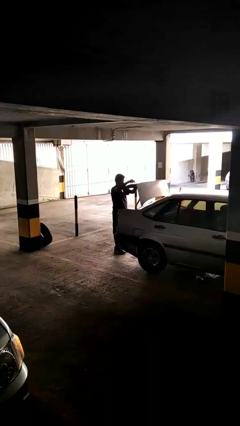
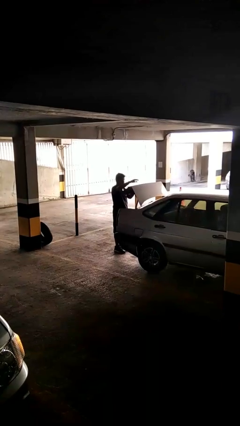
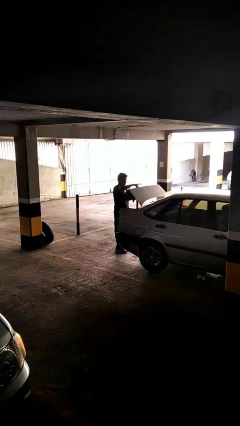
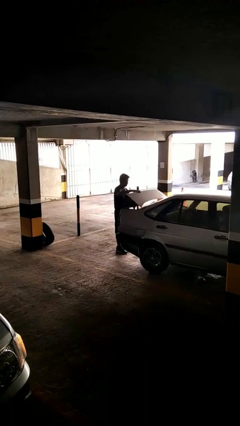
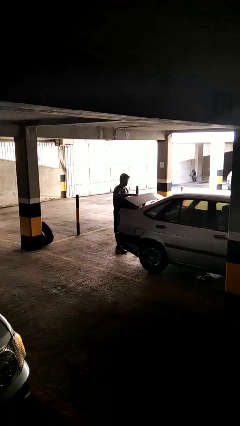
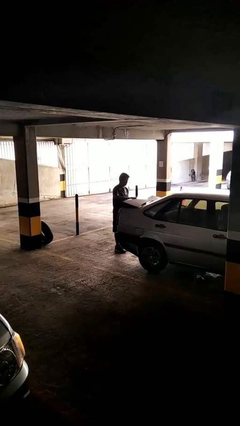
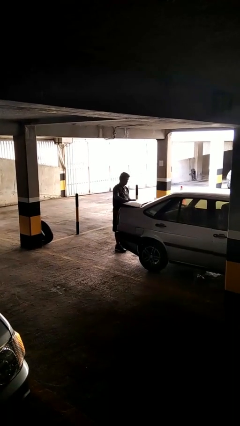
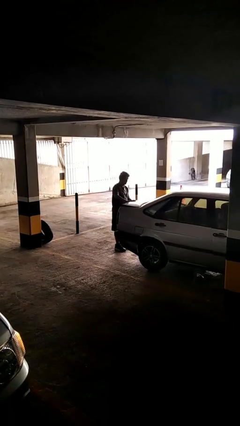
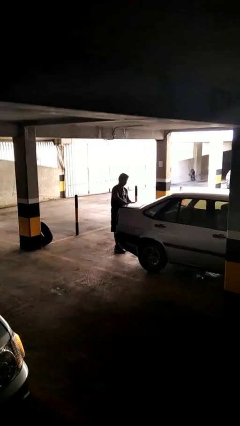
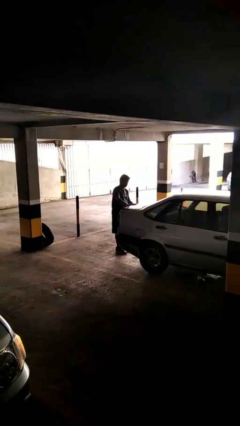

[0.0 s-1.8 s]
person closes car trunk

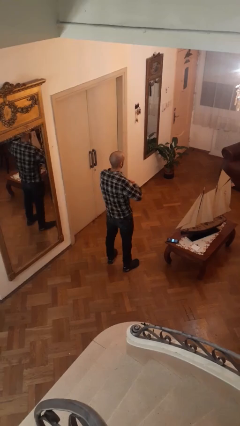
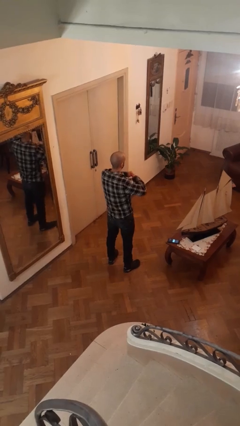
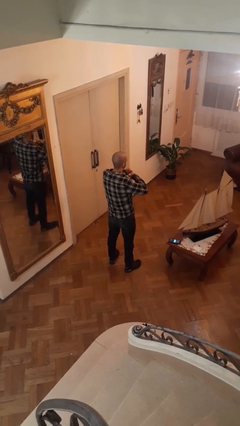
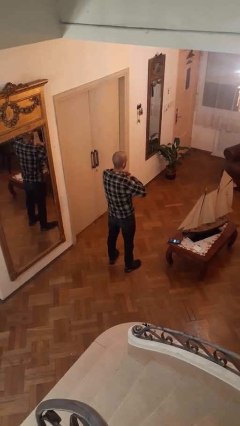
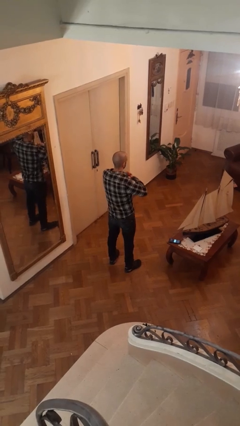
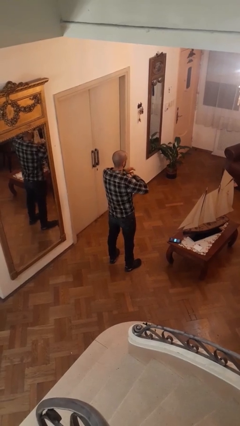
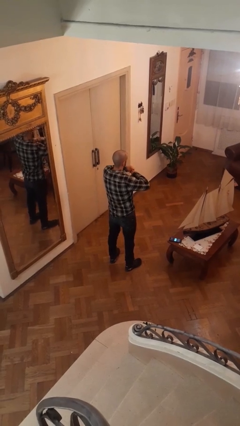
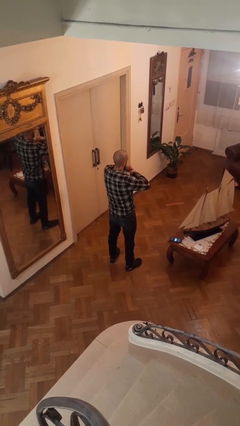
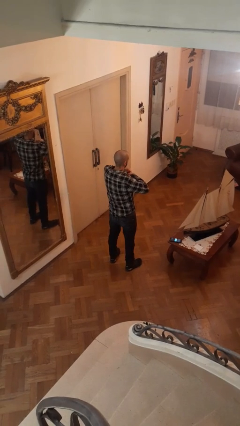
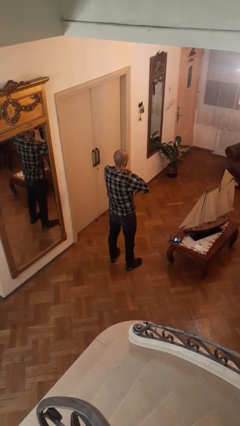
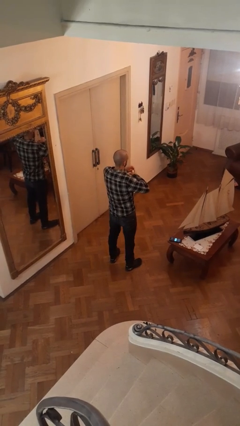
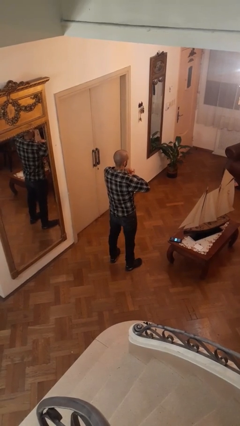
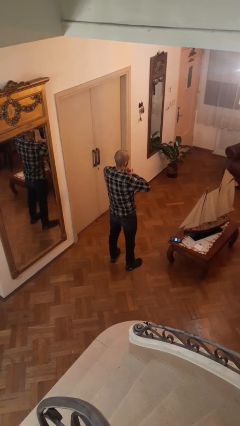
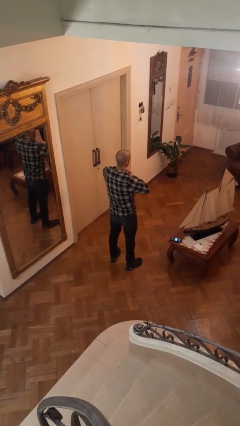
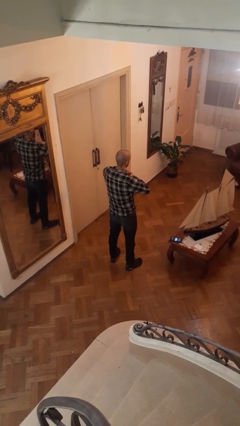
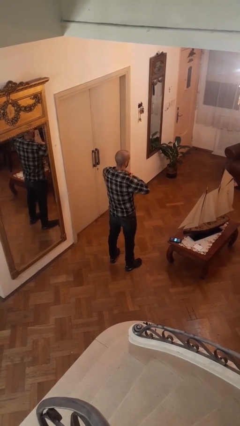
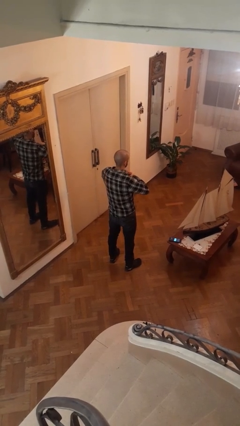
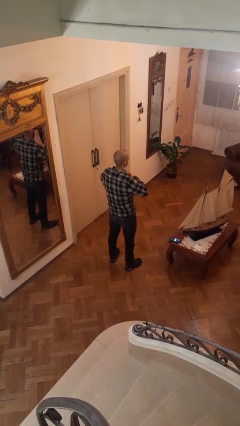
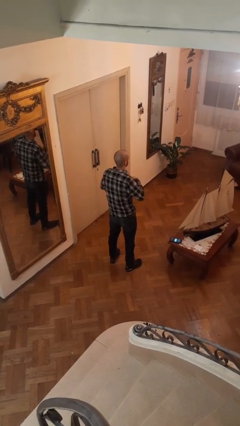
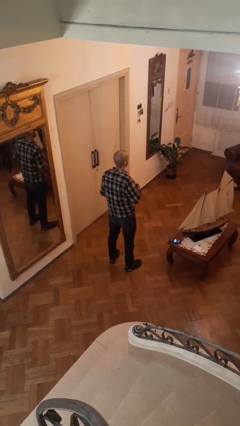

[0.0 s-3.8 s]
person cracks knuckles

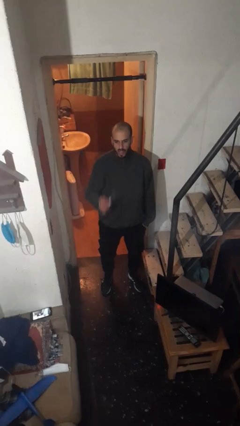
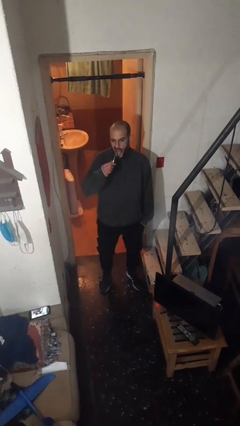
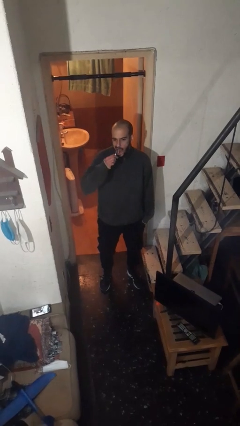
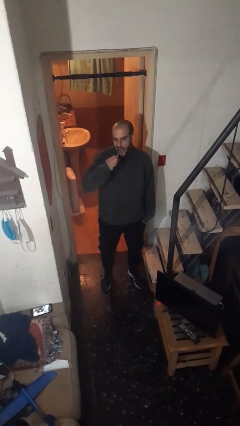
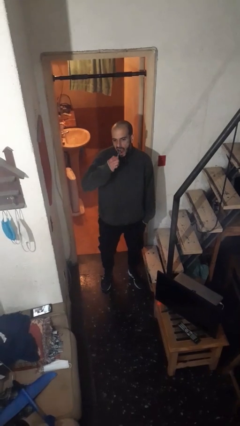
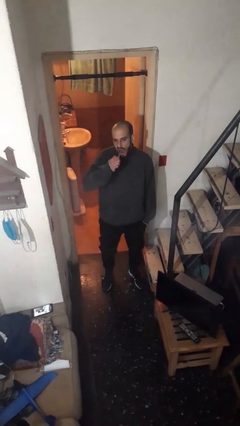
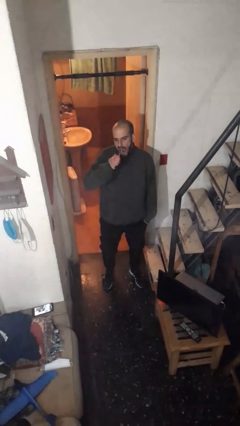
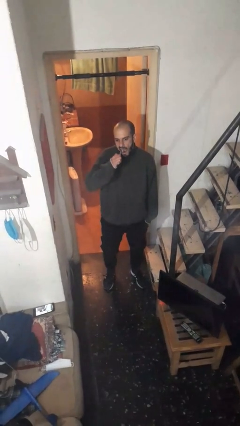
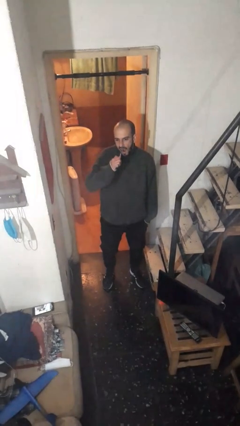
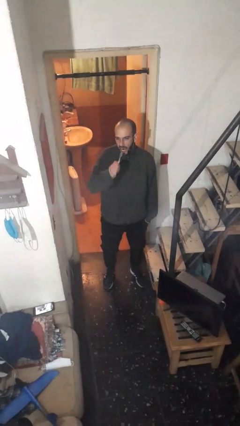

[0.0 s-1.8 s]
person brushes teeth

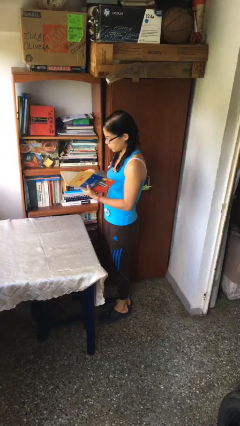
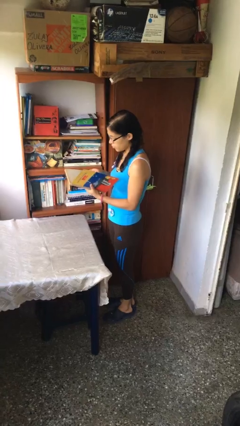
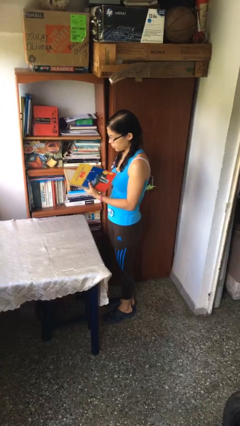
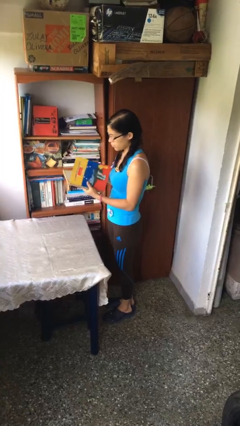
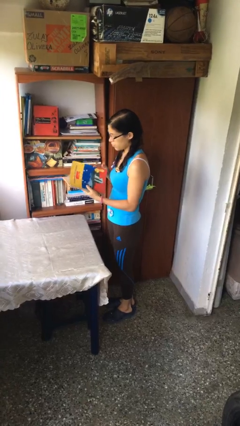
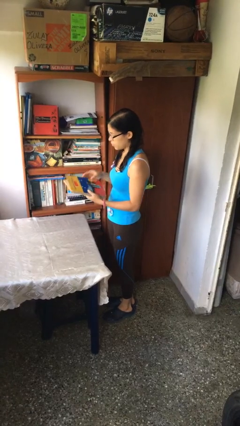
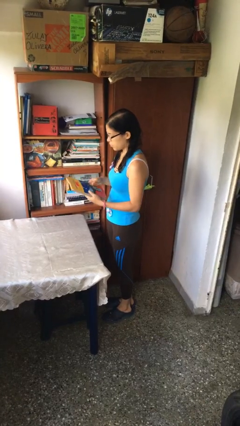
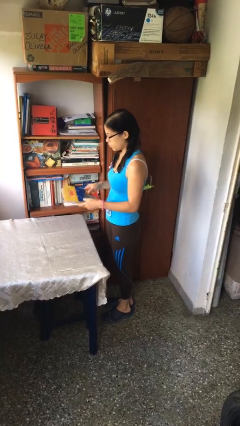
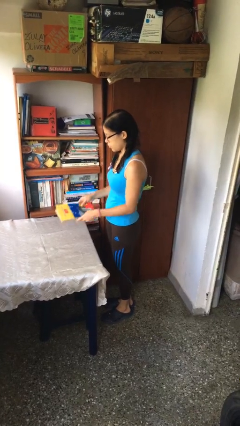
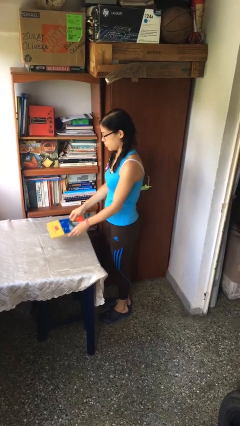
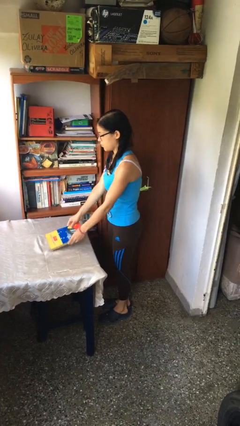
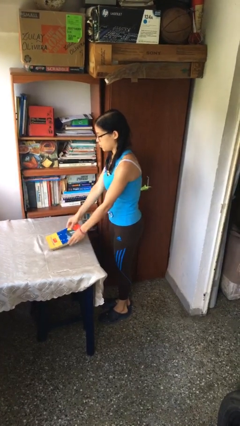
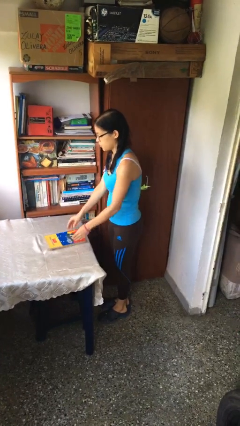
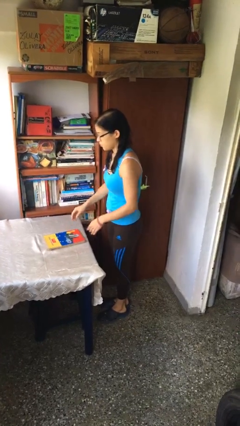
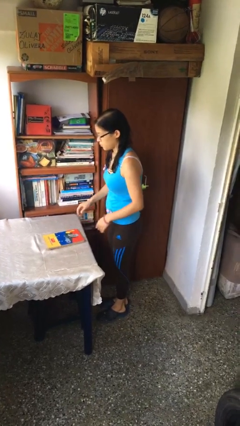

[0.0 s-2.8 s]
person puts down object on table

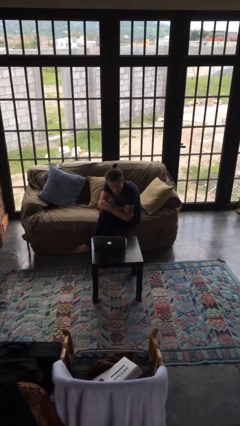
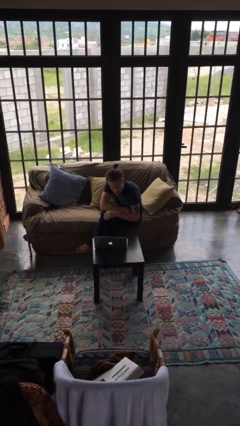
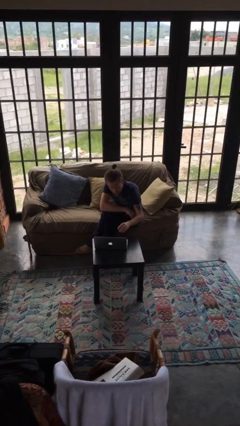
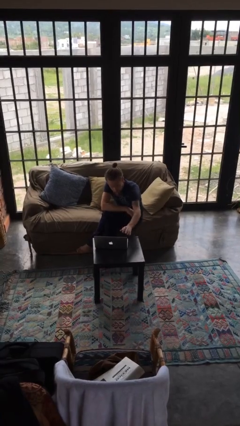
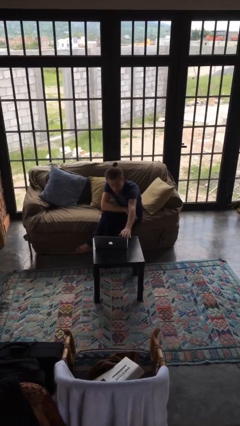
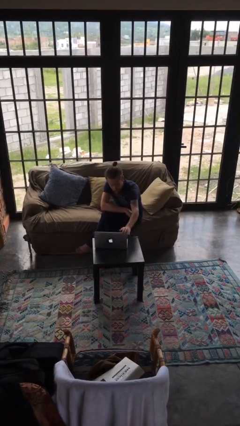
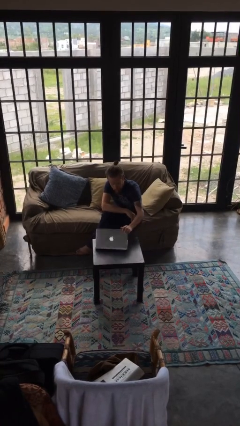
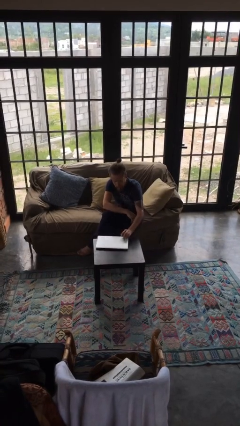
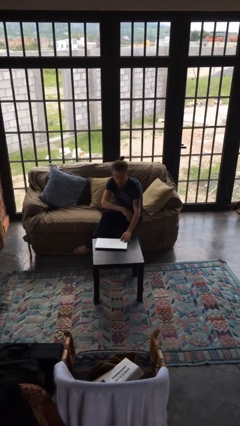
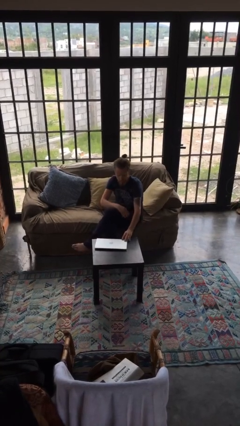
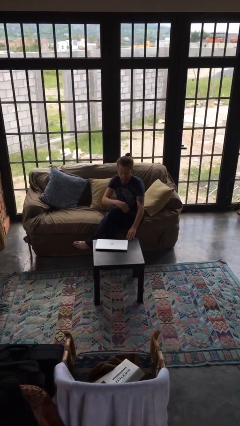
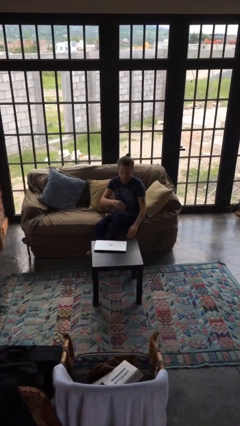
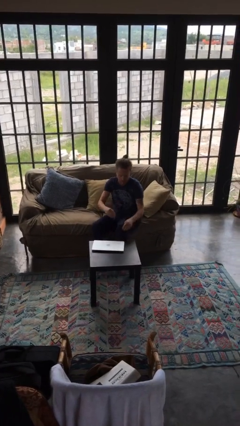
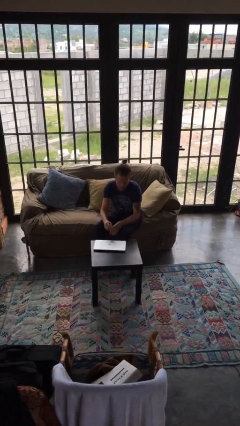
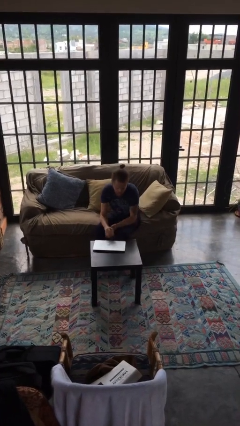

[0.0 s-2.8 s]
person closes laptop

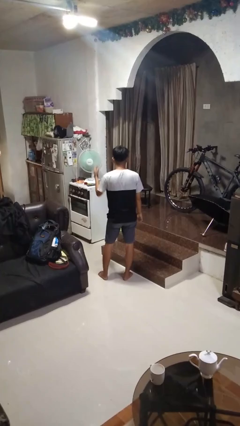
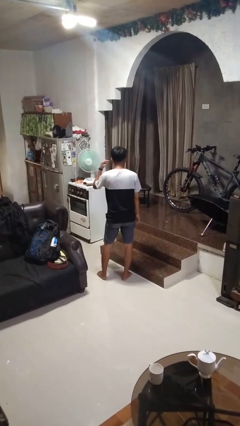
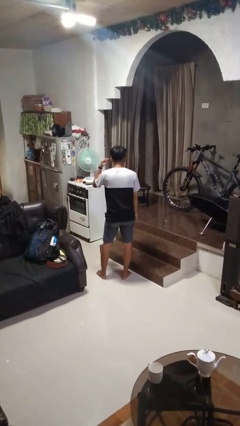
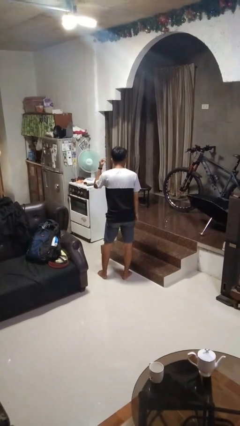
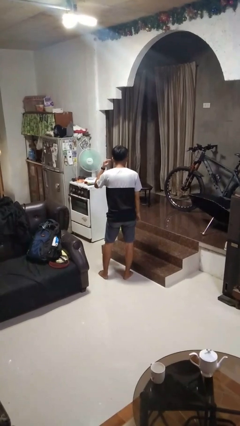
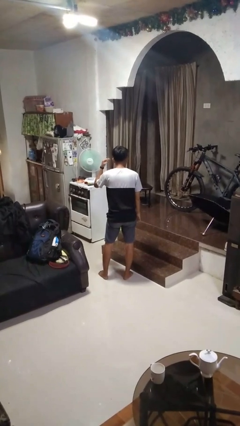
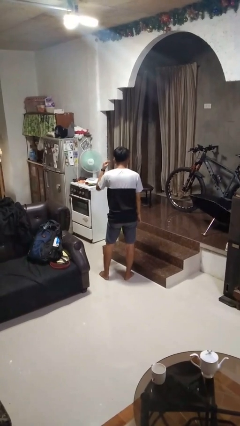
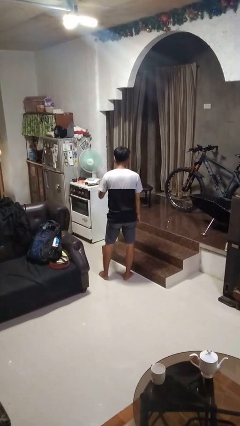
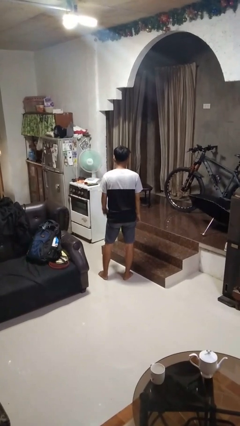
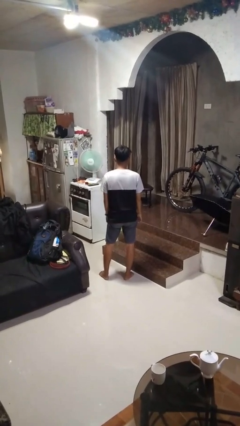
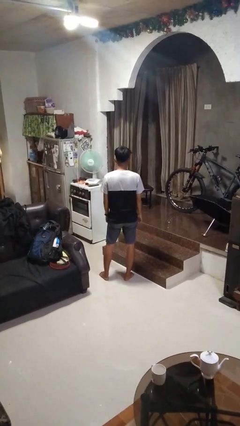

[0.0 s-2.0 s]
person gestures listen closely

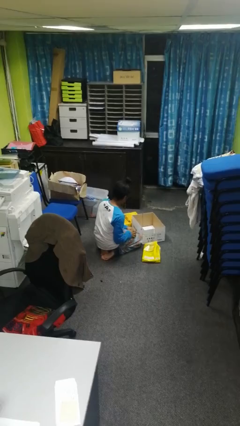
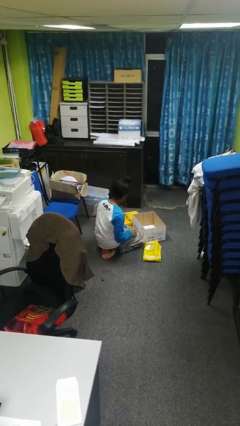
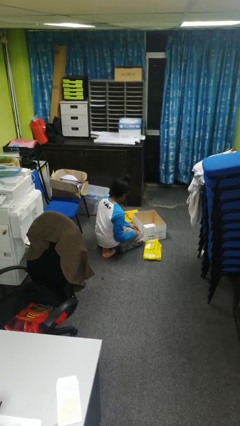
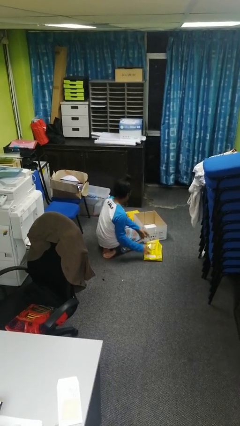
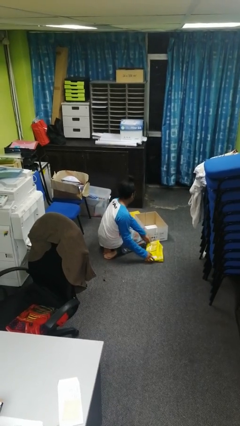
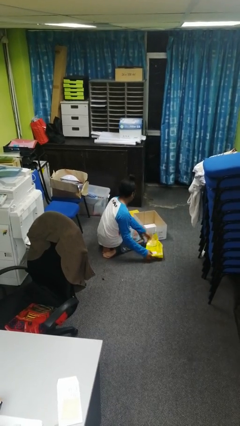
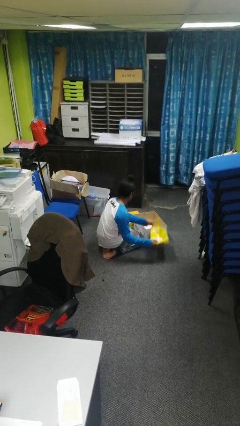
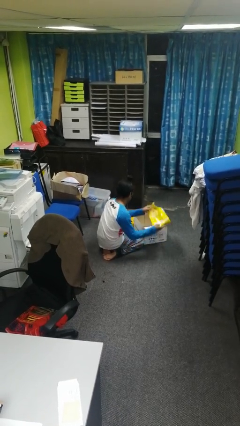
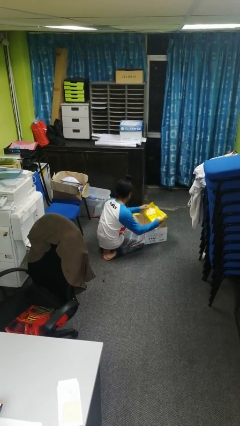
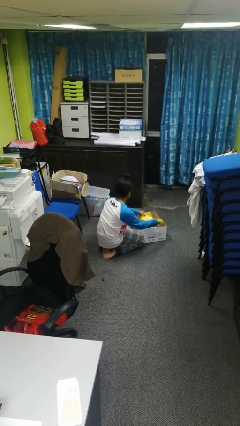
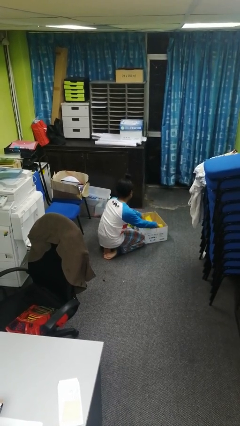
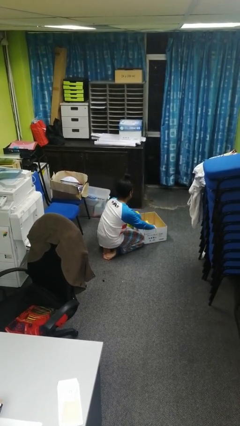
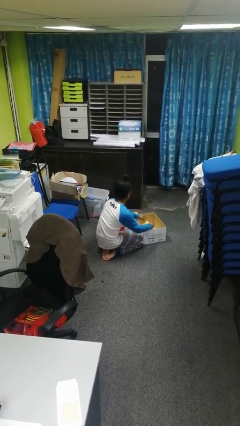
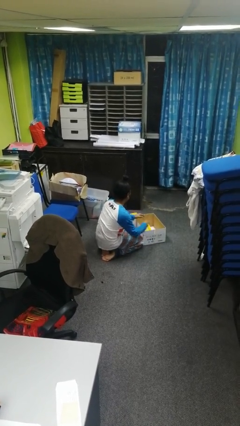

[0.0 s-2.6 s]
person puts object into box
